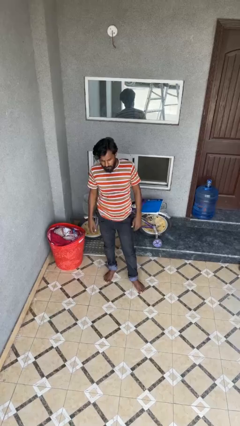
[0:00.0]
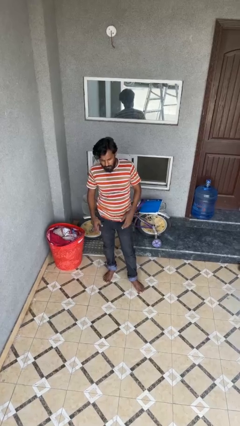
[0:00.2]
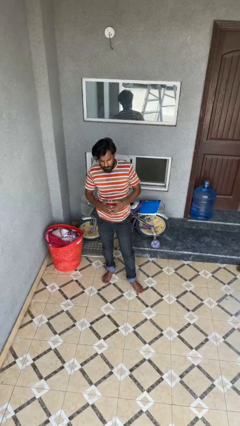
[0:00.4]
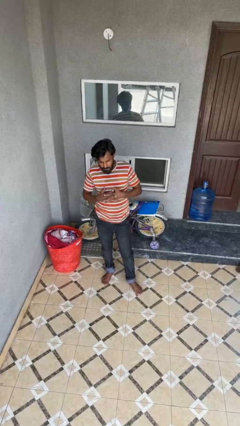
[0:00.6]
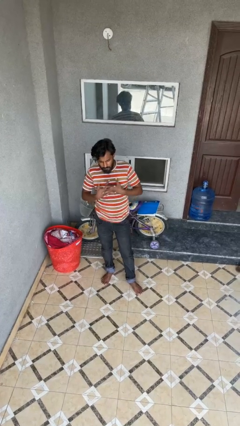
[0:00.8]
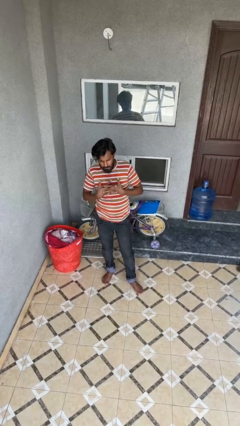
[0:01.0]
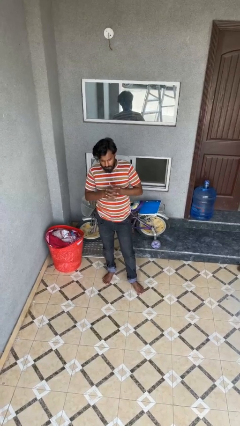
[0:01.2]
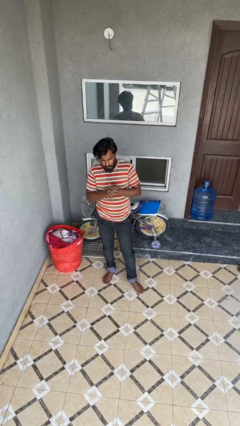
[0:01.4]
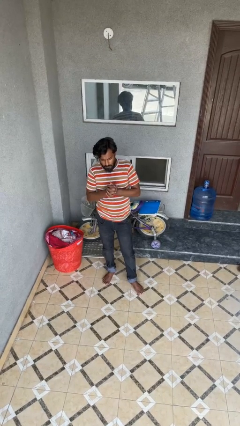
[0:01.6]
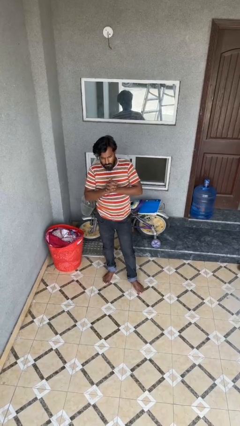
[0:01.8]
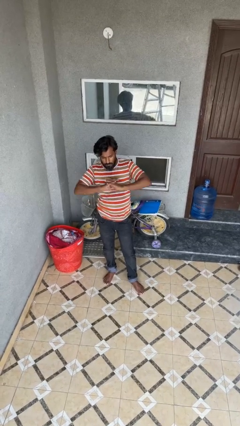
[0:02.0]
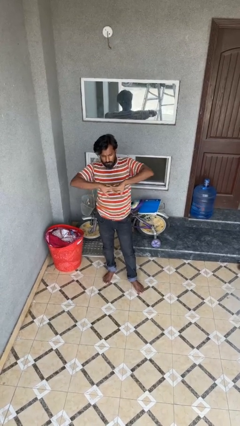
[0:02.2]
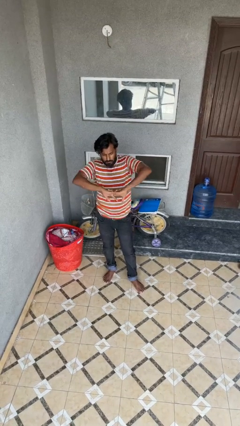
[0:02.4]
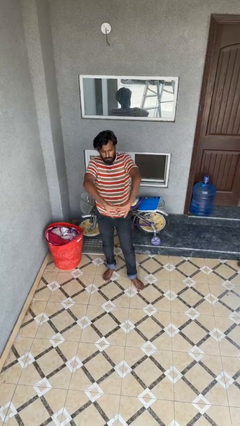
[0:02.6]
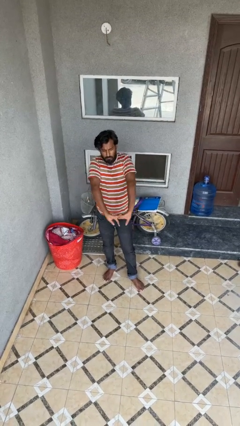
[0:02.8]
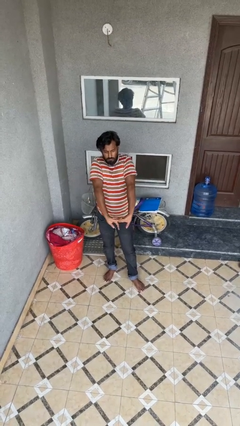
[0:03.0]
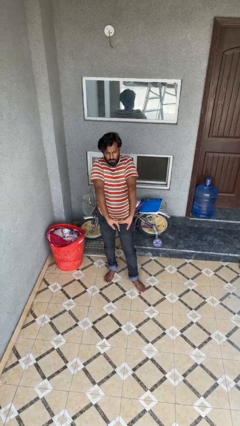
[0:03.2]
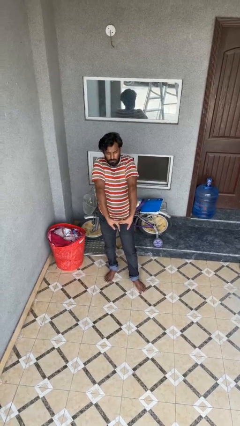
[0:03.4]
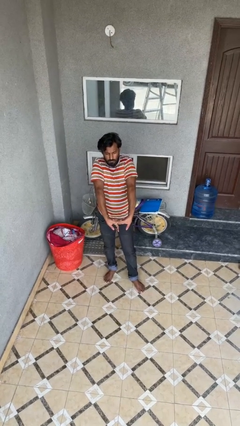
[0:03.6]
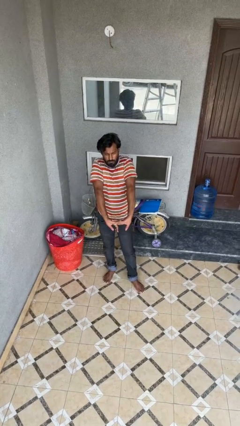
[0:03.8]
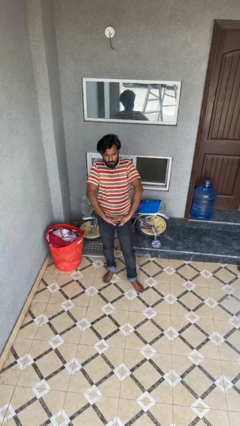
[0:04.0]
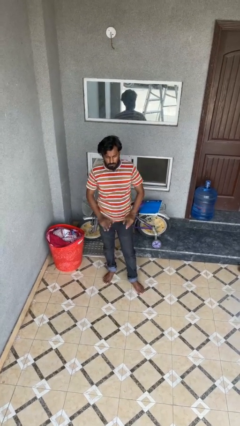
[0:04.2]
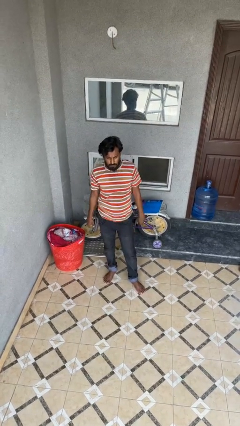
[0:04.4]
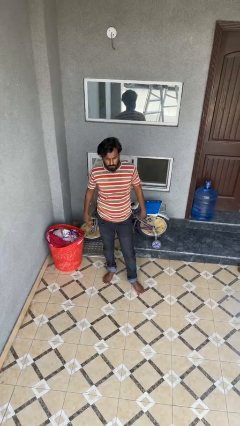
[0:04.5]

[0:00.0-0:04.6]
person cracks knuckles

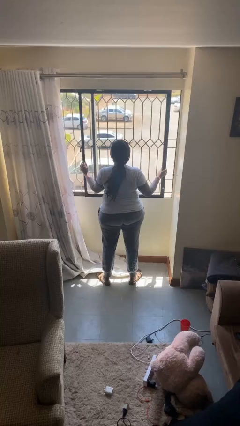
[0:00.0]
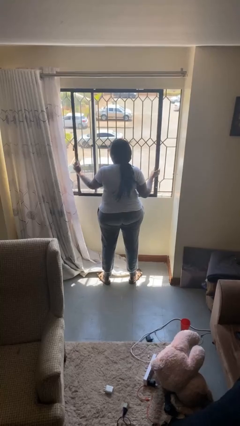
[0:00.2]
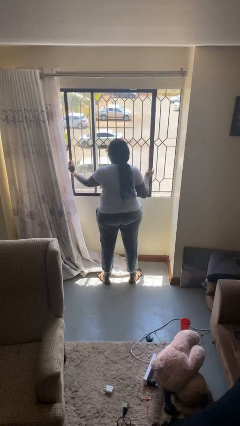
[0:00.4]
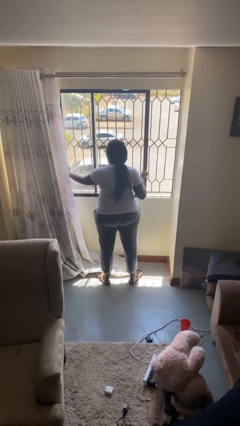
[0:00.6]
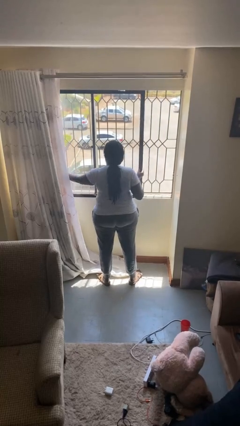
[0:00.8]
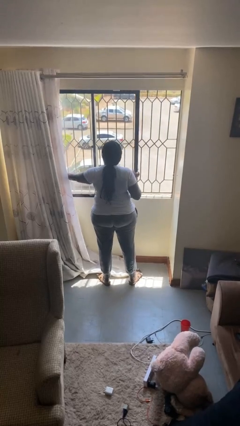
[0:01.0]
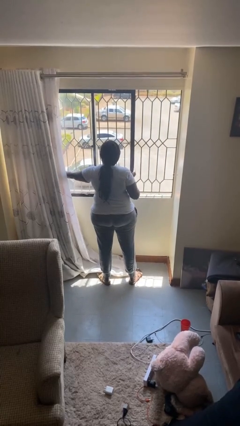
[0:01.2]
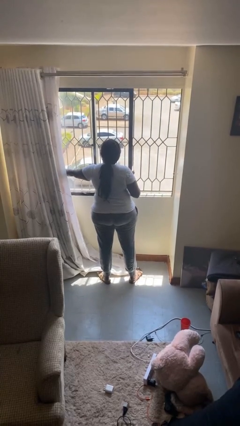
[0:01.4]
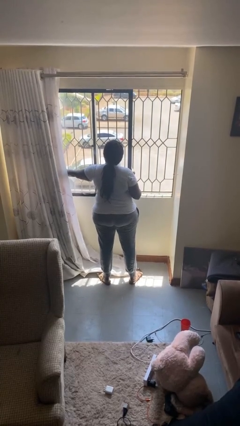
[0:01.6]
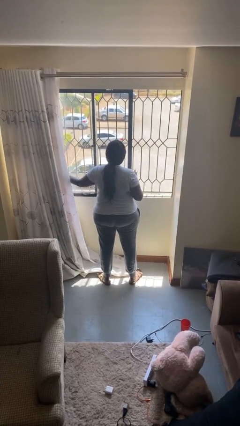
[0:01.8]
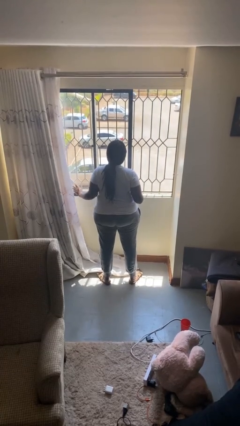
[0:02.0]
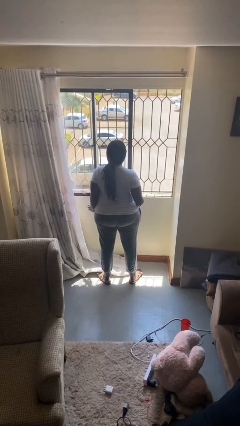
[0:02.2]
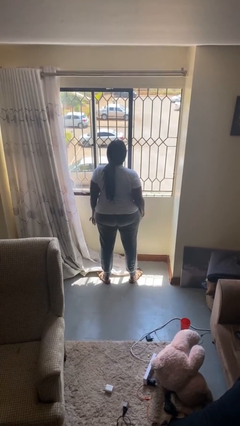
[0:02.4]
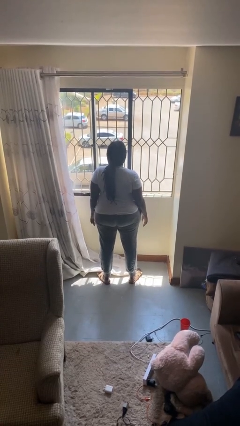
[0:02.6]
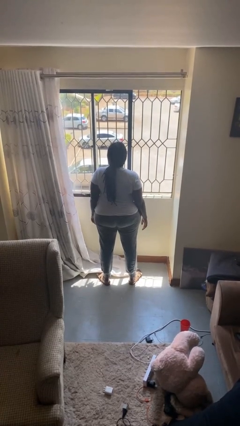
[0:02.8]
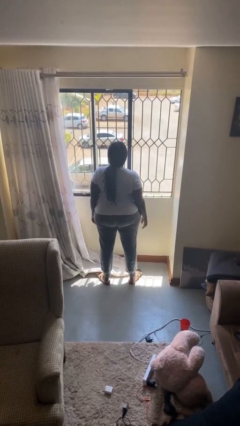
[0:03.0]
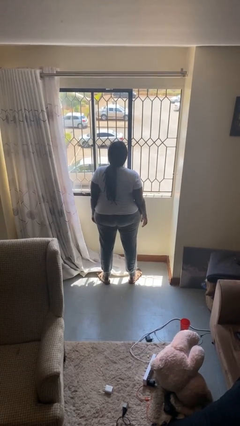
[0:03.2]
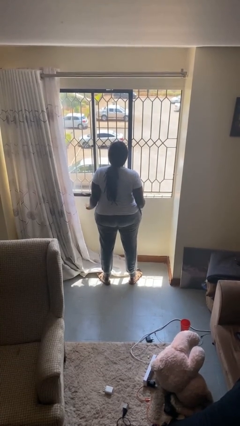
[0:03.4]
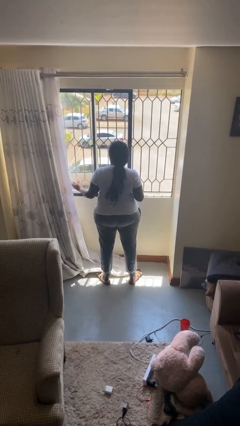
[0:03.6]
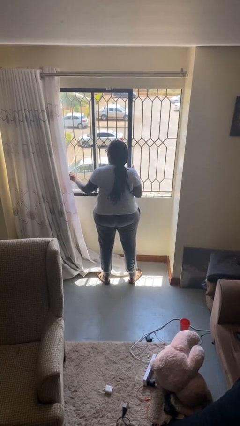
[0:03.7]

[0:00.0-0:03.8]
person opens home window

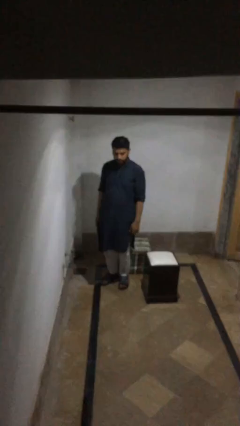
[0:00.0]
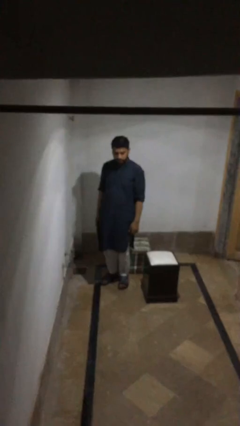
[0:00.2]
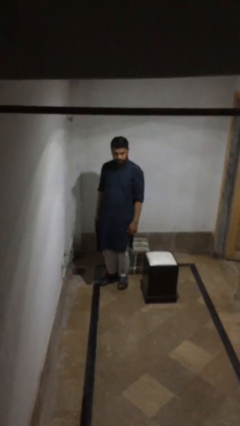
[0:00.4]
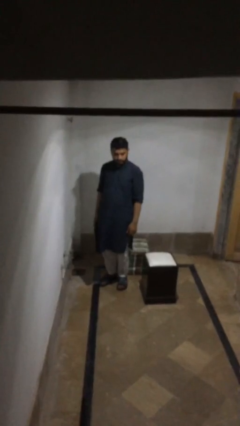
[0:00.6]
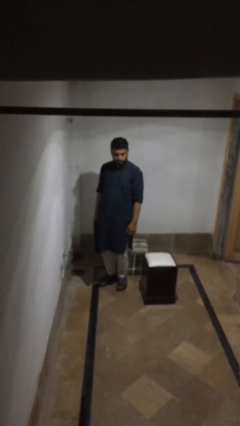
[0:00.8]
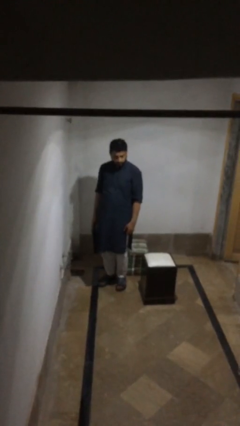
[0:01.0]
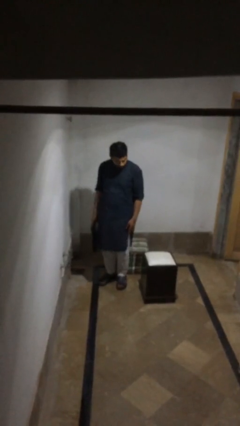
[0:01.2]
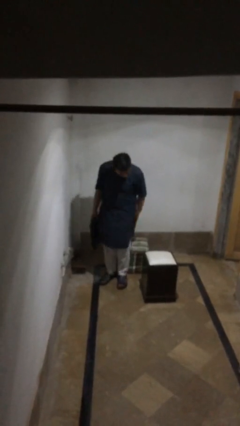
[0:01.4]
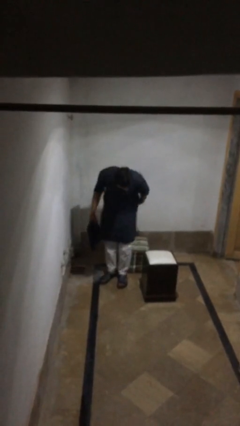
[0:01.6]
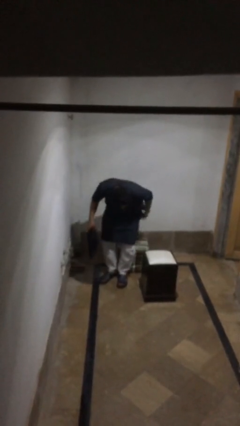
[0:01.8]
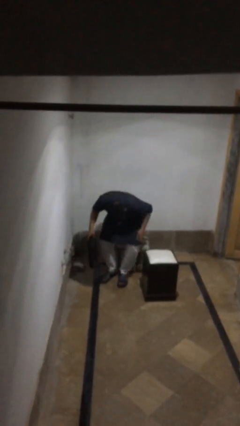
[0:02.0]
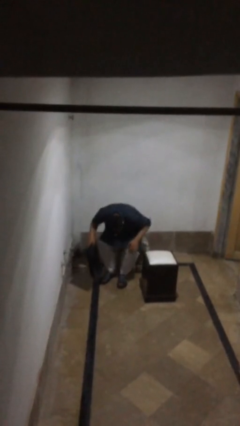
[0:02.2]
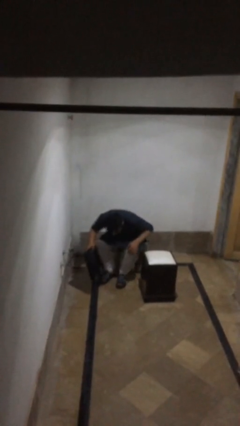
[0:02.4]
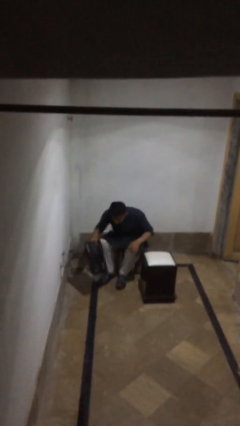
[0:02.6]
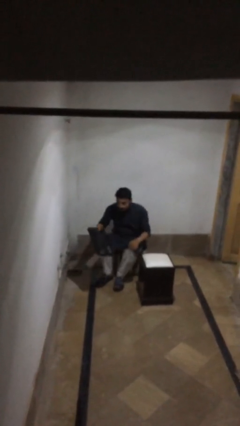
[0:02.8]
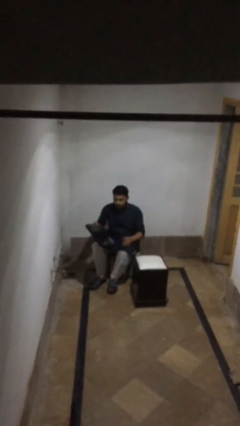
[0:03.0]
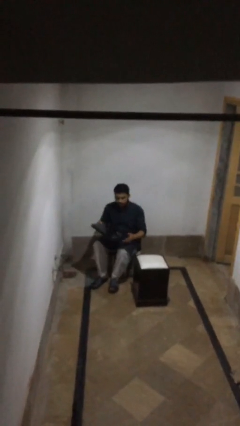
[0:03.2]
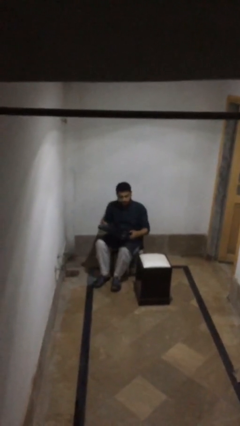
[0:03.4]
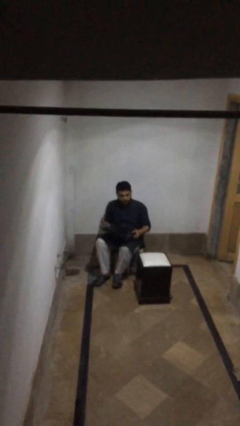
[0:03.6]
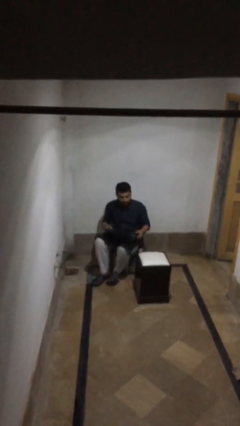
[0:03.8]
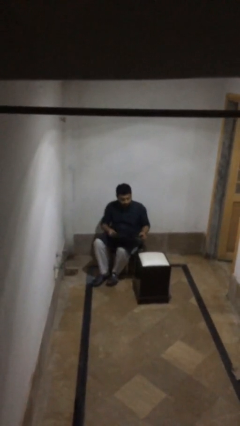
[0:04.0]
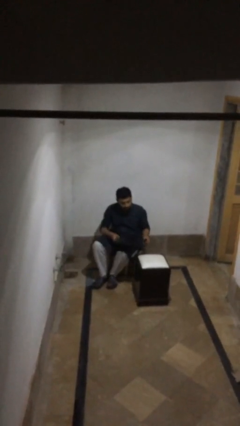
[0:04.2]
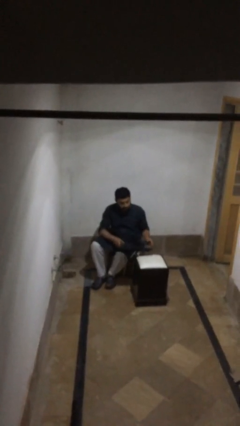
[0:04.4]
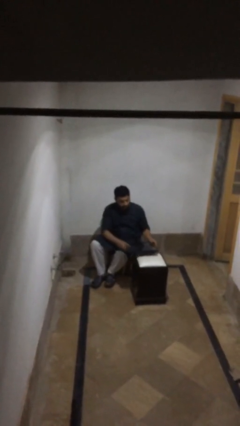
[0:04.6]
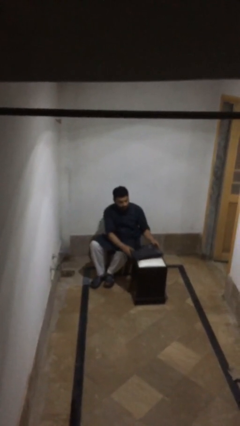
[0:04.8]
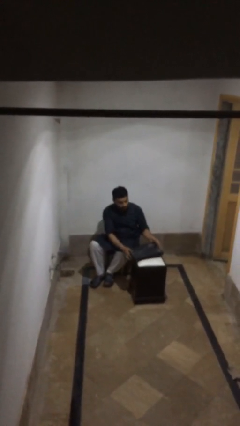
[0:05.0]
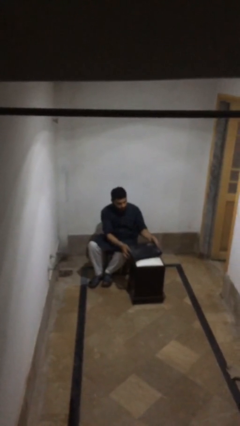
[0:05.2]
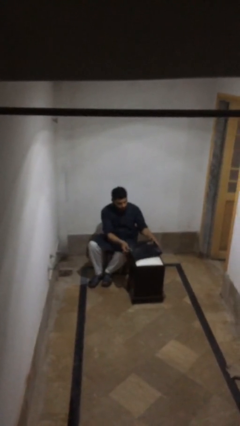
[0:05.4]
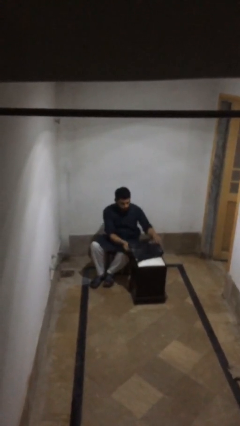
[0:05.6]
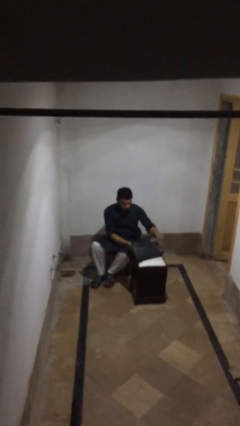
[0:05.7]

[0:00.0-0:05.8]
person sits down

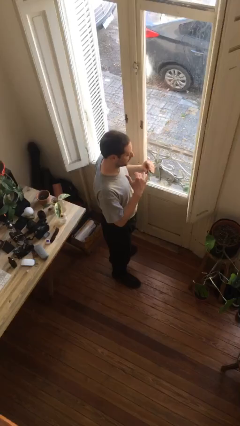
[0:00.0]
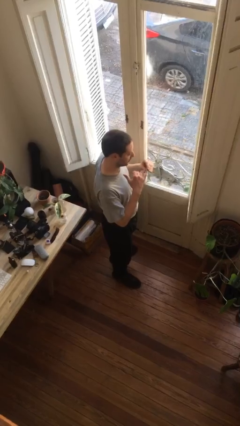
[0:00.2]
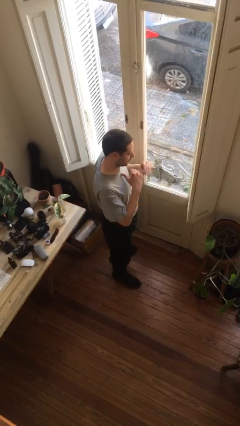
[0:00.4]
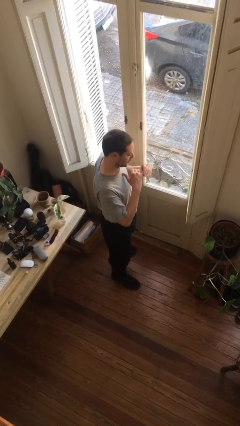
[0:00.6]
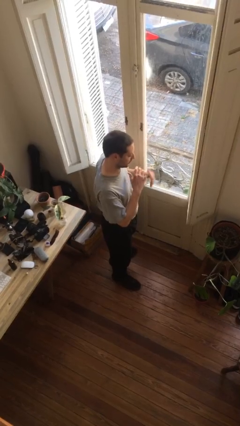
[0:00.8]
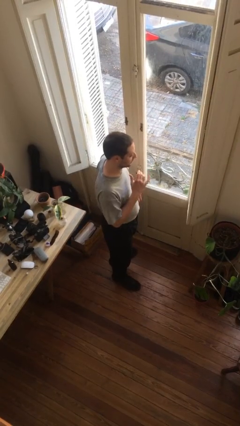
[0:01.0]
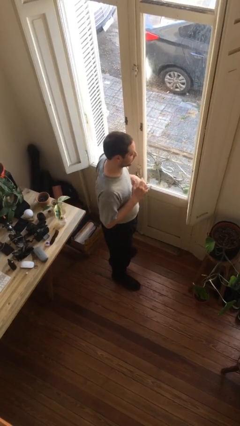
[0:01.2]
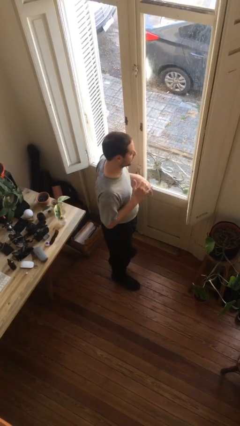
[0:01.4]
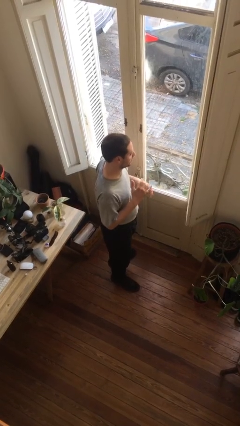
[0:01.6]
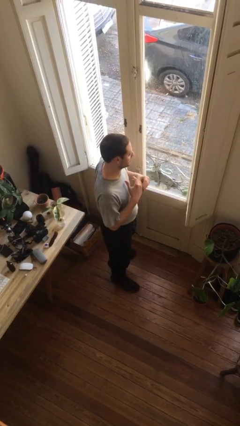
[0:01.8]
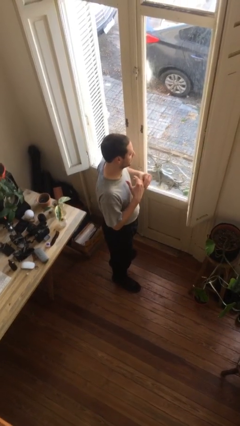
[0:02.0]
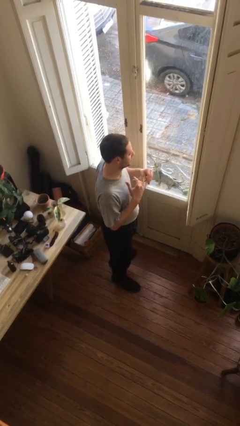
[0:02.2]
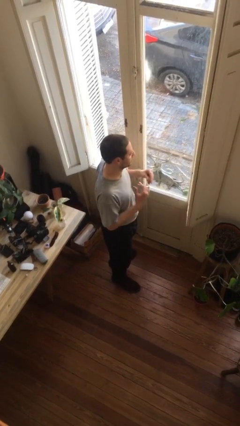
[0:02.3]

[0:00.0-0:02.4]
person puts on ring

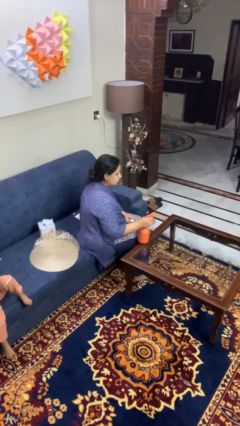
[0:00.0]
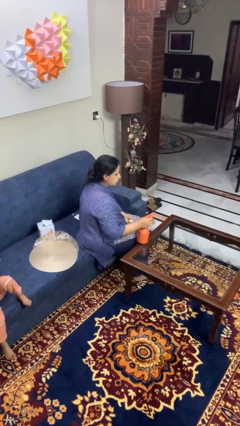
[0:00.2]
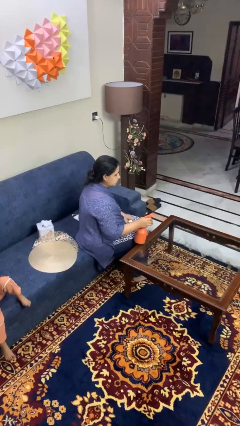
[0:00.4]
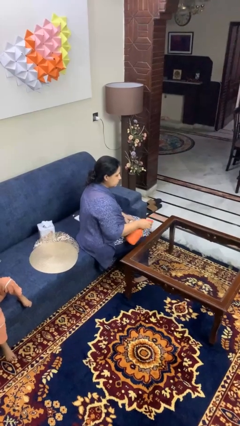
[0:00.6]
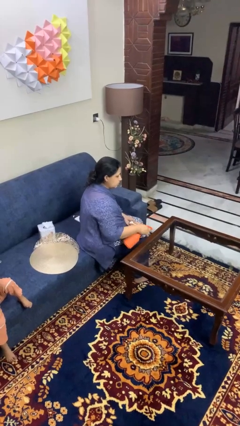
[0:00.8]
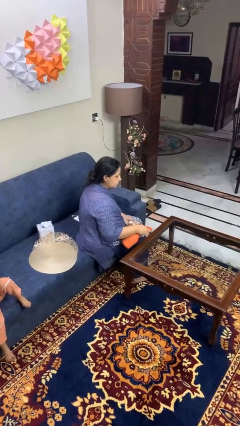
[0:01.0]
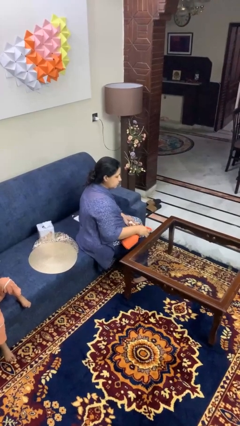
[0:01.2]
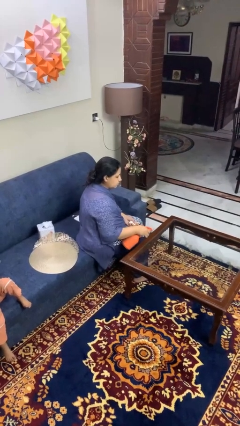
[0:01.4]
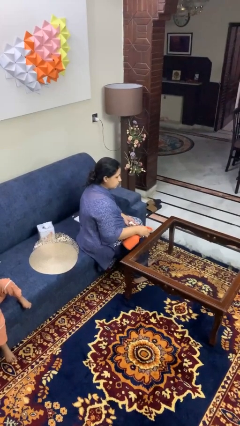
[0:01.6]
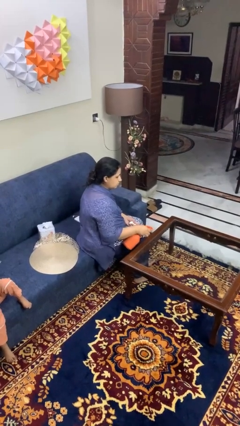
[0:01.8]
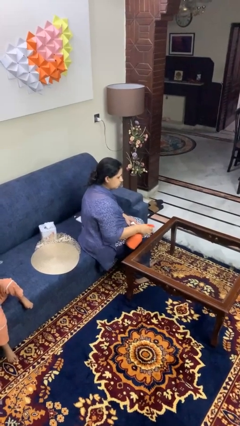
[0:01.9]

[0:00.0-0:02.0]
person sprays from bottle
